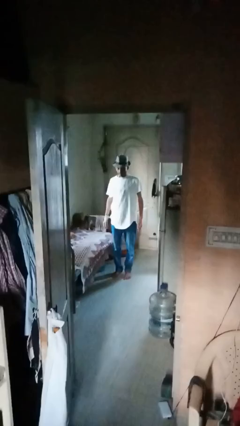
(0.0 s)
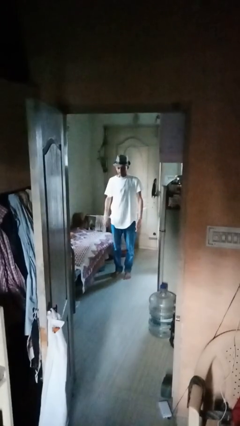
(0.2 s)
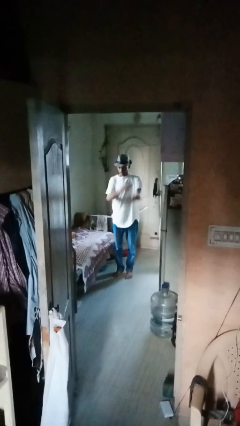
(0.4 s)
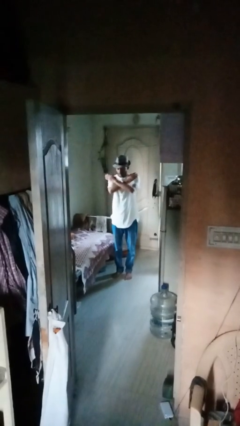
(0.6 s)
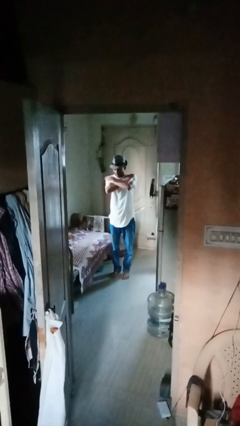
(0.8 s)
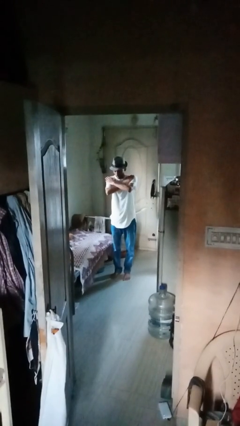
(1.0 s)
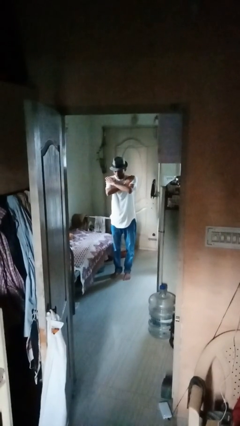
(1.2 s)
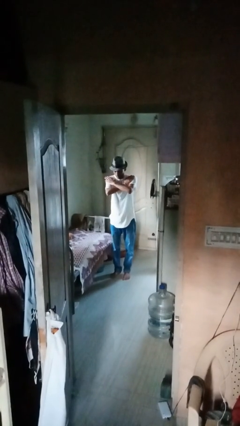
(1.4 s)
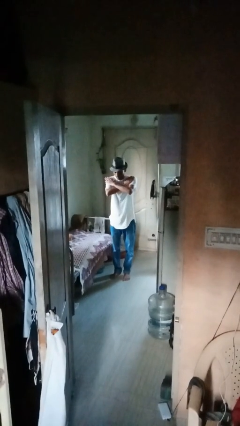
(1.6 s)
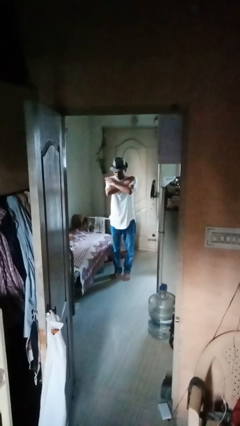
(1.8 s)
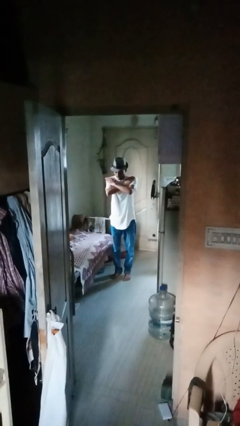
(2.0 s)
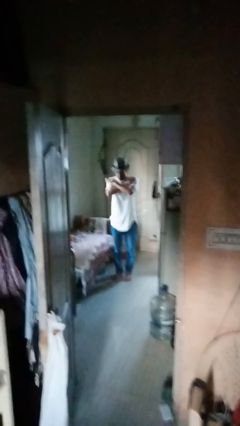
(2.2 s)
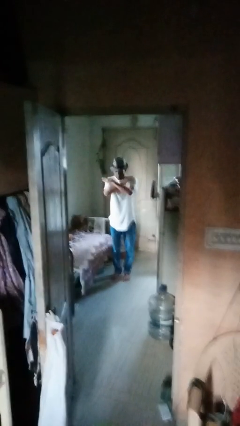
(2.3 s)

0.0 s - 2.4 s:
person gestures arms x

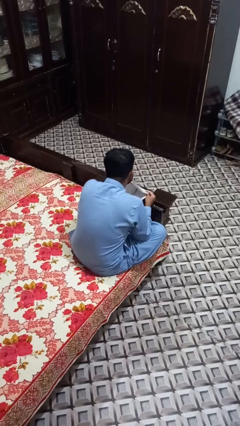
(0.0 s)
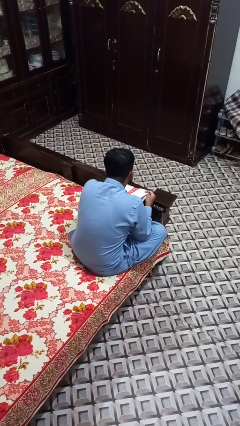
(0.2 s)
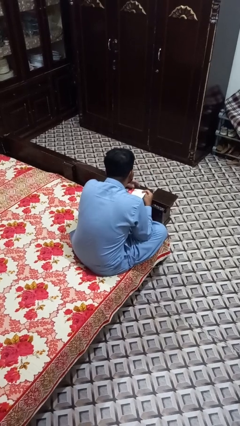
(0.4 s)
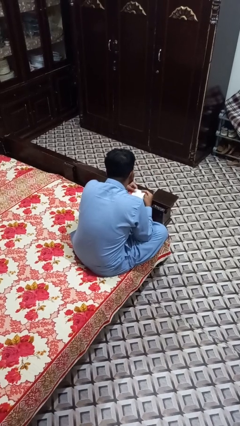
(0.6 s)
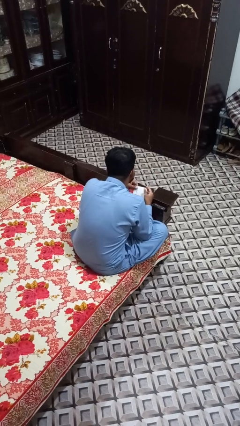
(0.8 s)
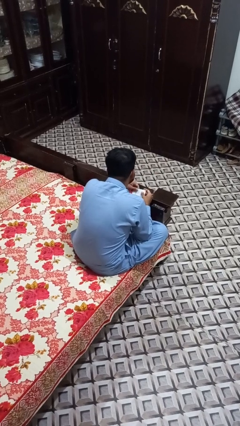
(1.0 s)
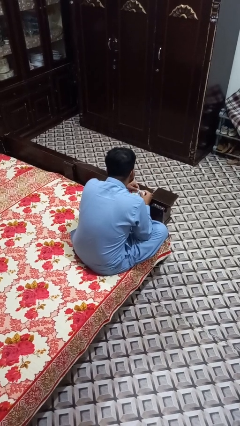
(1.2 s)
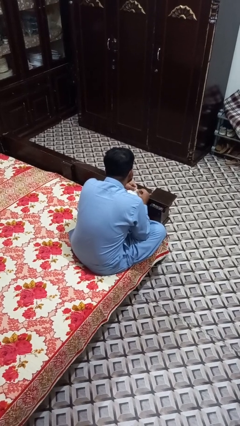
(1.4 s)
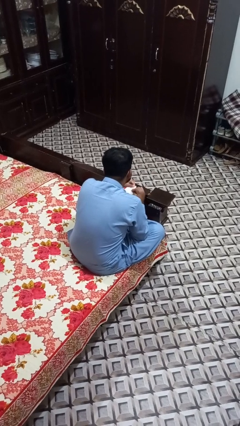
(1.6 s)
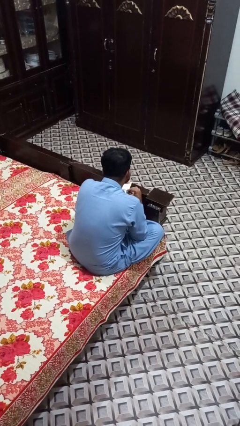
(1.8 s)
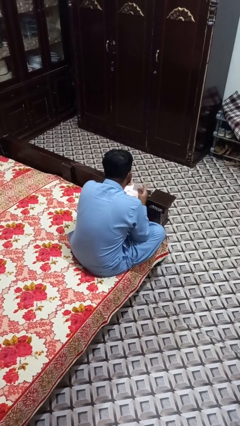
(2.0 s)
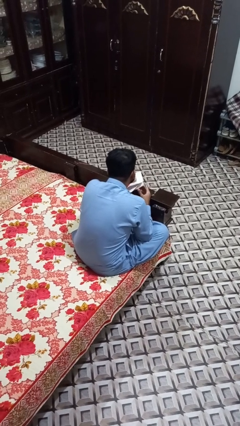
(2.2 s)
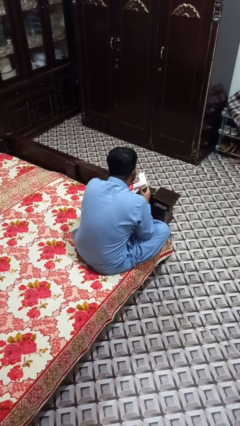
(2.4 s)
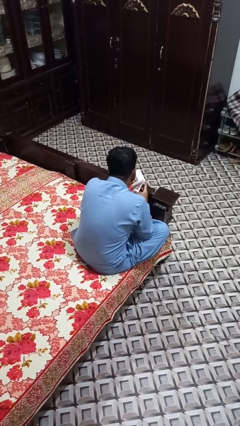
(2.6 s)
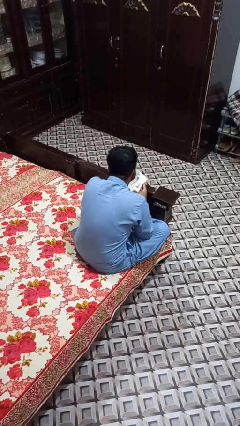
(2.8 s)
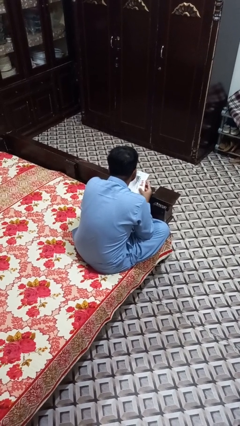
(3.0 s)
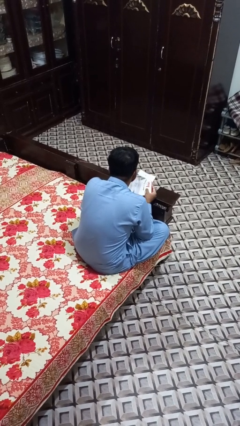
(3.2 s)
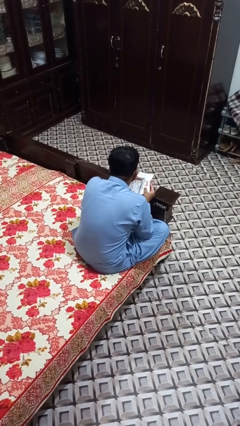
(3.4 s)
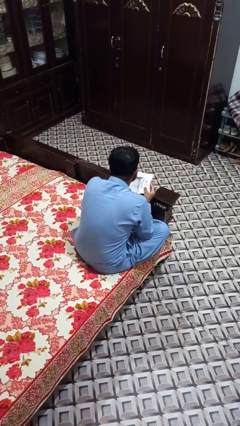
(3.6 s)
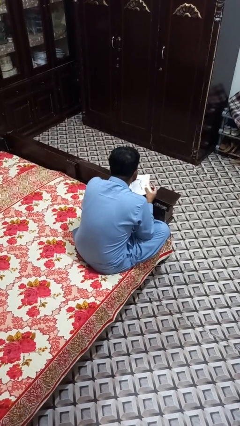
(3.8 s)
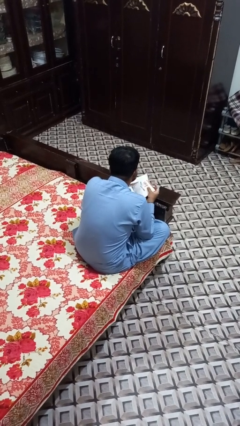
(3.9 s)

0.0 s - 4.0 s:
person tears paper

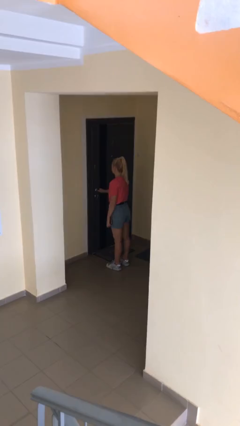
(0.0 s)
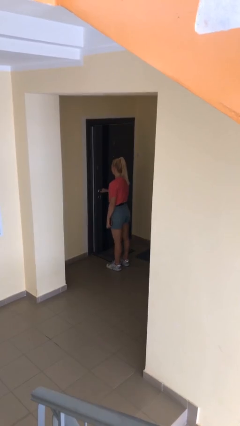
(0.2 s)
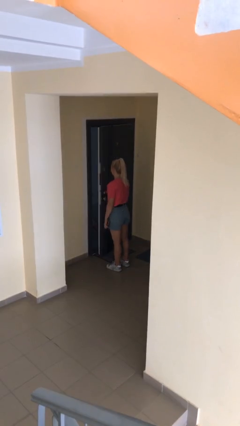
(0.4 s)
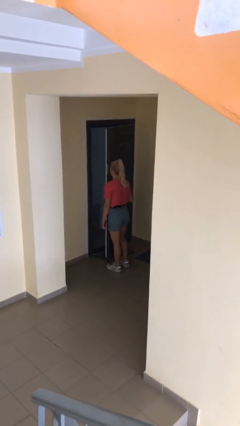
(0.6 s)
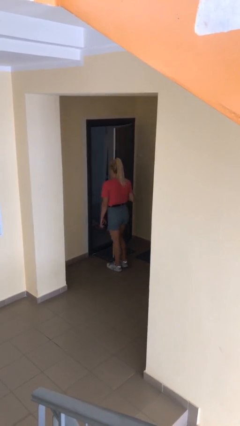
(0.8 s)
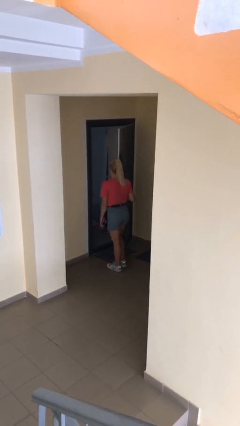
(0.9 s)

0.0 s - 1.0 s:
person opens facility door

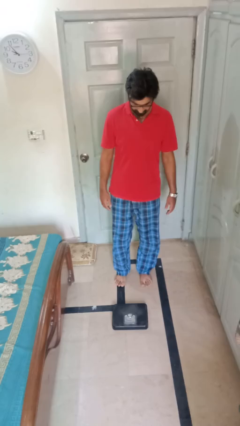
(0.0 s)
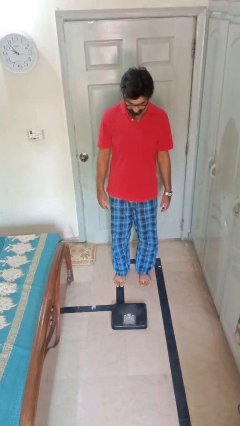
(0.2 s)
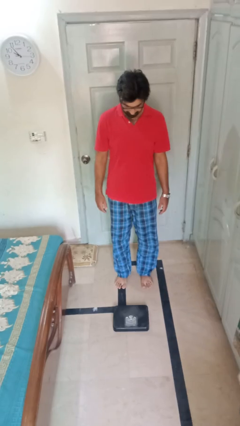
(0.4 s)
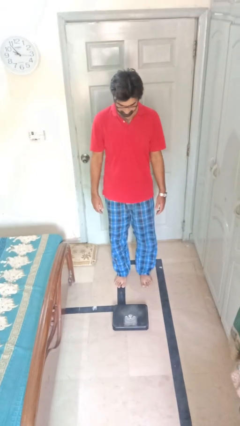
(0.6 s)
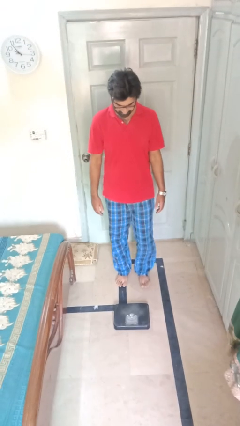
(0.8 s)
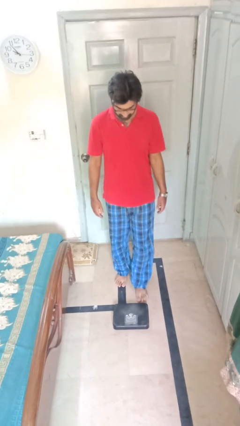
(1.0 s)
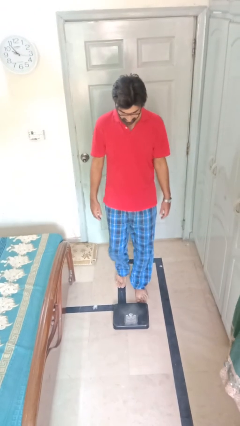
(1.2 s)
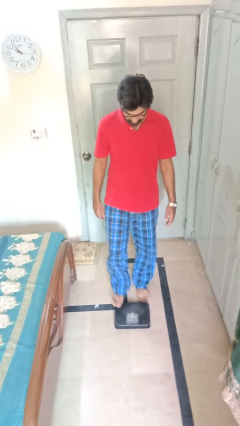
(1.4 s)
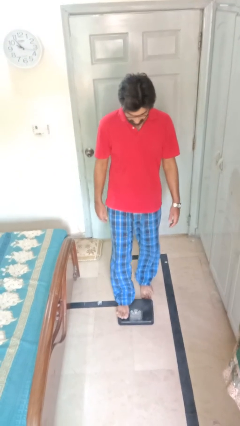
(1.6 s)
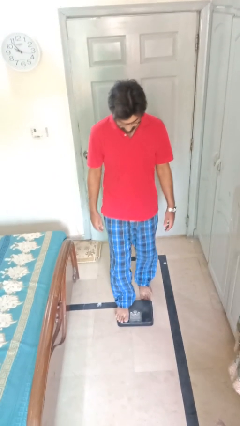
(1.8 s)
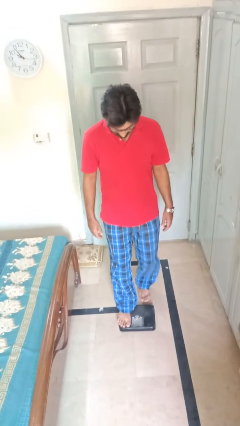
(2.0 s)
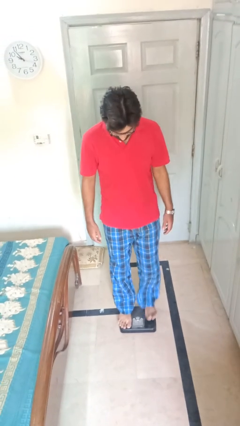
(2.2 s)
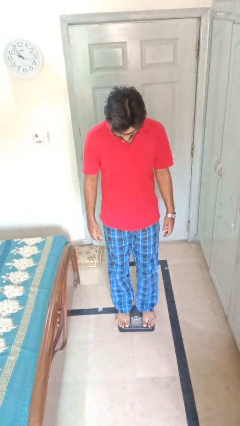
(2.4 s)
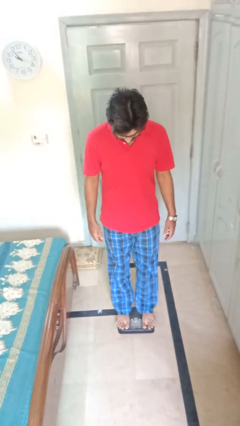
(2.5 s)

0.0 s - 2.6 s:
person uses bodyweight scale

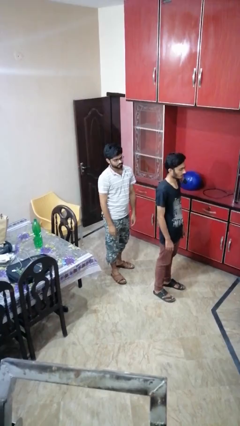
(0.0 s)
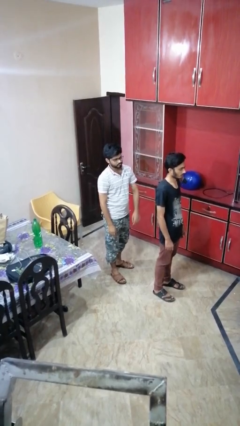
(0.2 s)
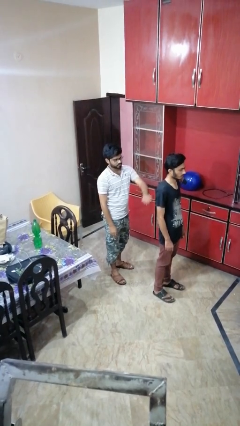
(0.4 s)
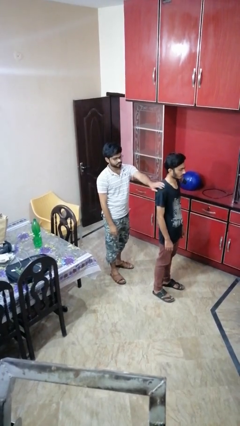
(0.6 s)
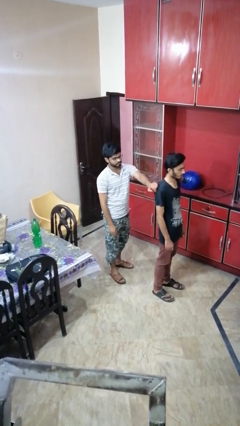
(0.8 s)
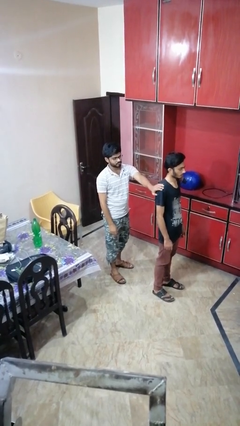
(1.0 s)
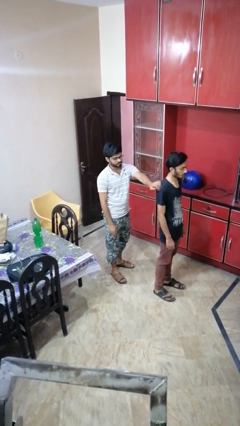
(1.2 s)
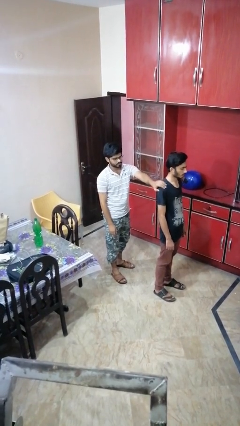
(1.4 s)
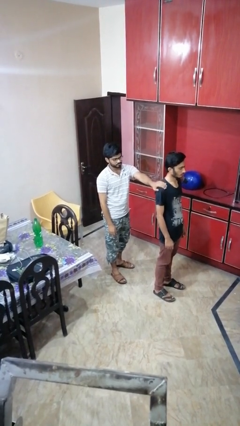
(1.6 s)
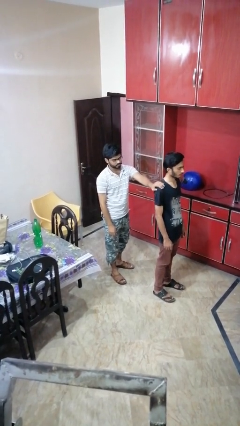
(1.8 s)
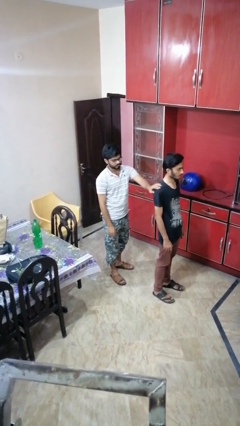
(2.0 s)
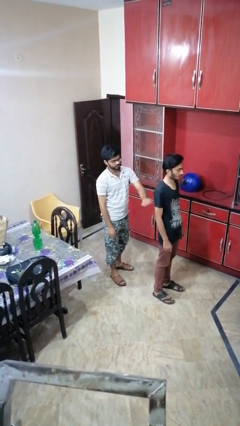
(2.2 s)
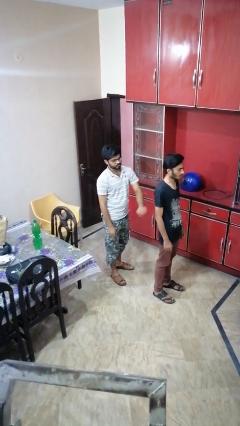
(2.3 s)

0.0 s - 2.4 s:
person touches back of person

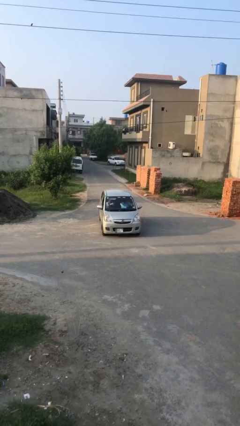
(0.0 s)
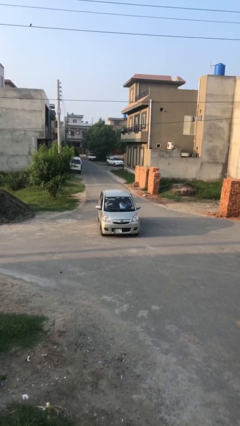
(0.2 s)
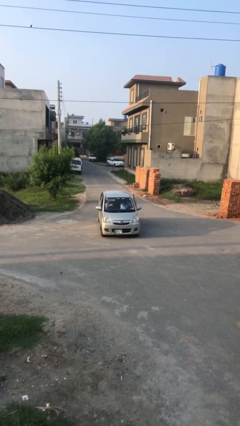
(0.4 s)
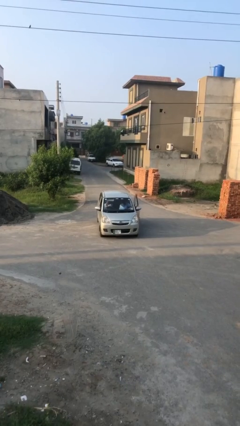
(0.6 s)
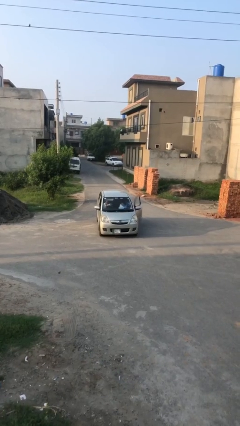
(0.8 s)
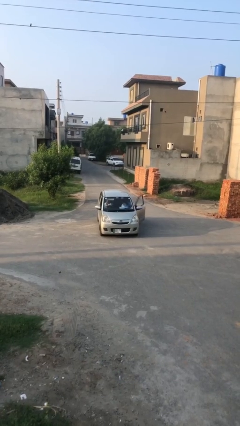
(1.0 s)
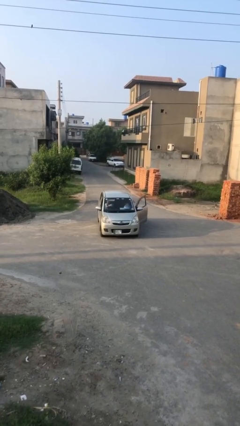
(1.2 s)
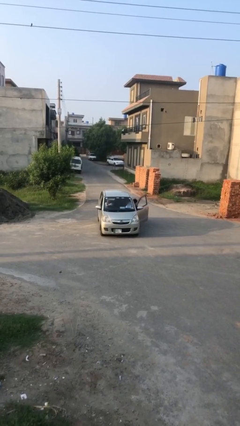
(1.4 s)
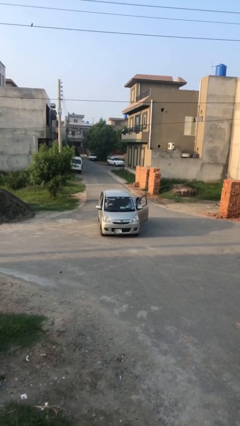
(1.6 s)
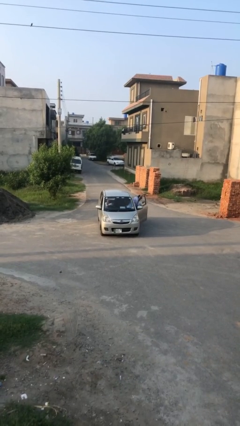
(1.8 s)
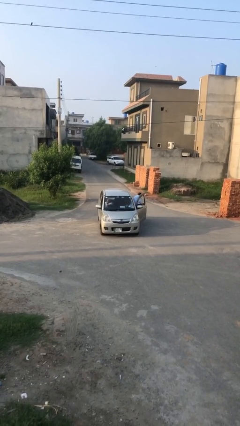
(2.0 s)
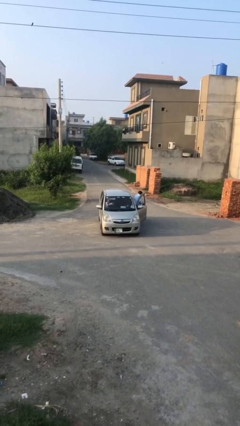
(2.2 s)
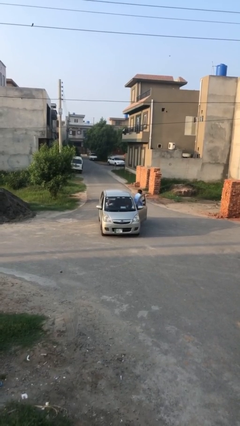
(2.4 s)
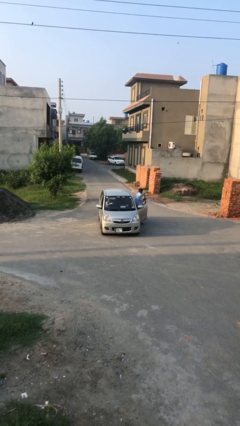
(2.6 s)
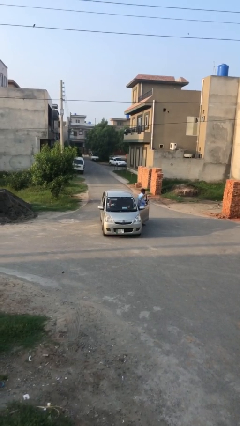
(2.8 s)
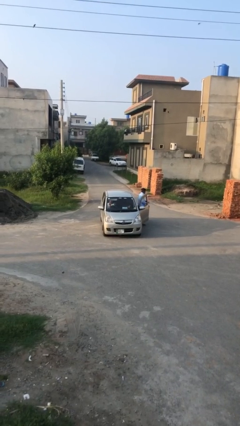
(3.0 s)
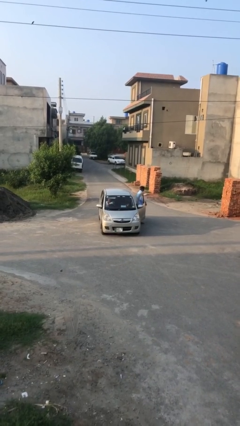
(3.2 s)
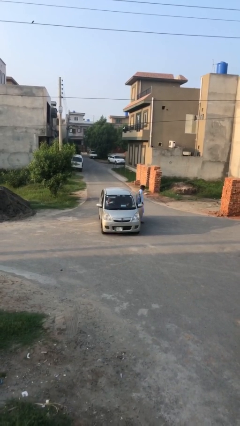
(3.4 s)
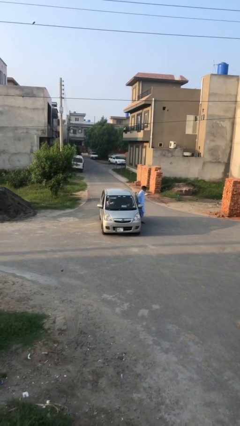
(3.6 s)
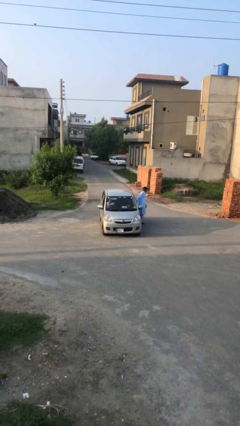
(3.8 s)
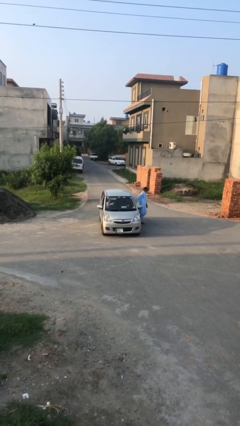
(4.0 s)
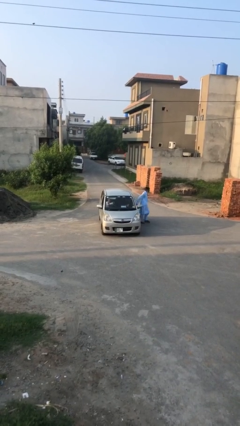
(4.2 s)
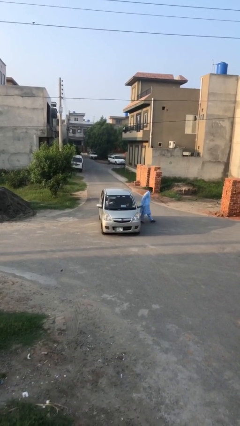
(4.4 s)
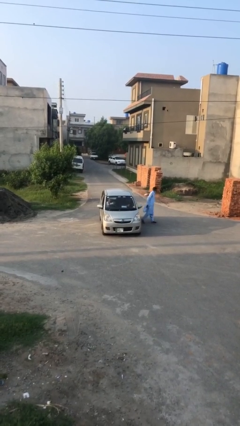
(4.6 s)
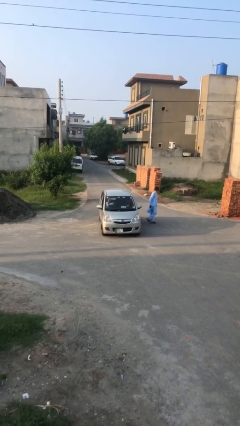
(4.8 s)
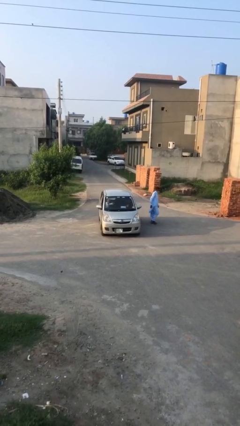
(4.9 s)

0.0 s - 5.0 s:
car drops off person

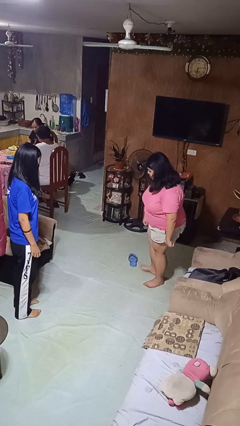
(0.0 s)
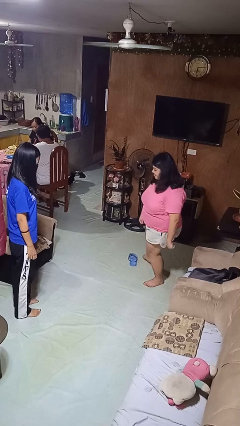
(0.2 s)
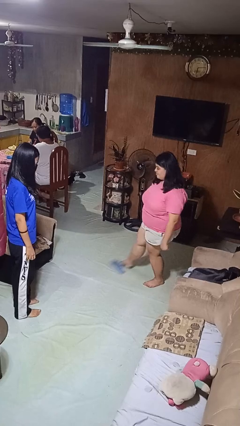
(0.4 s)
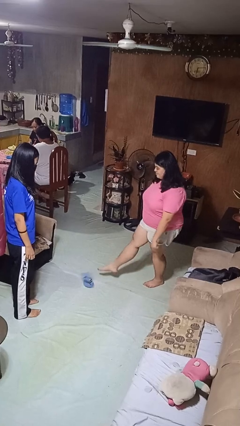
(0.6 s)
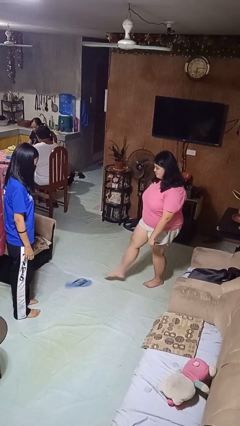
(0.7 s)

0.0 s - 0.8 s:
person kicks object to person
